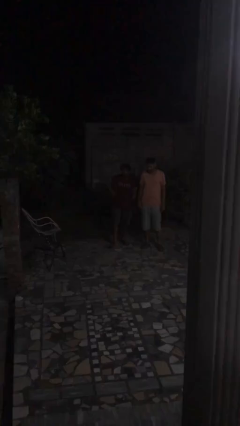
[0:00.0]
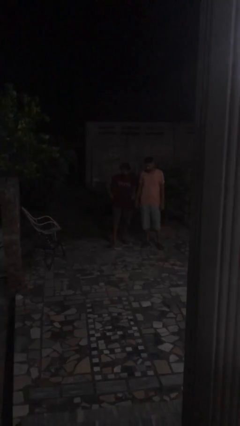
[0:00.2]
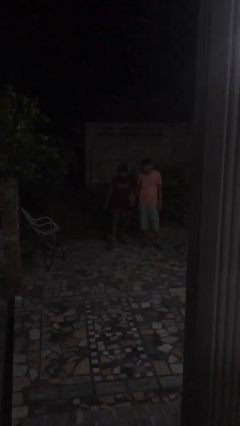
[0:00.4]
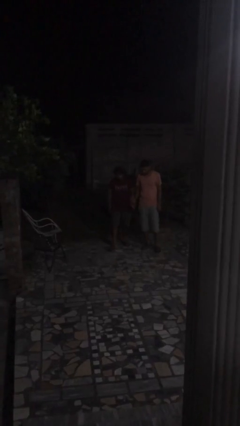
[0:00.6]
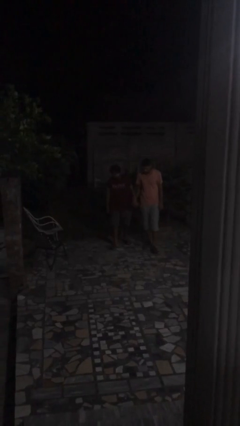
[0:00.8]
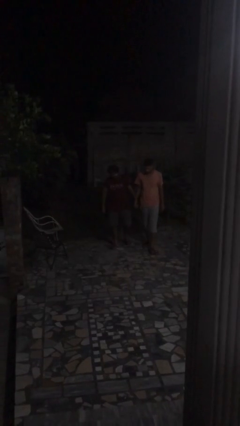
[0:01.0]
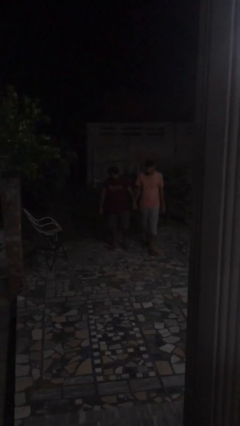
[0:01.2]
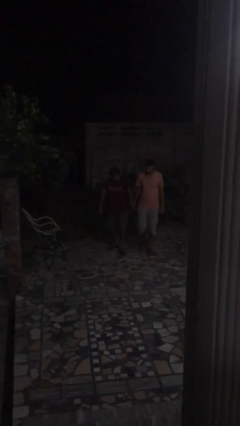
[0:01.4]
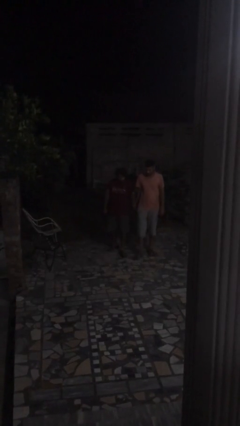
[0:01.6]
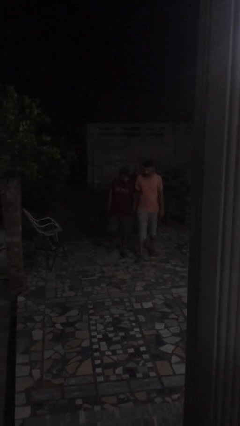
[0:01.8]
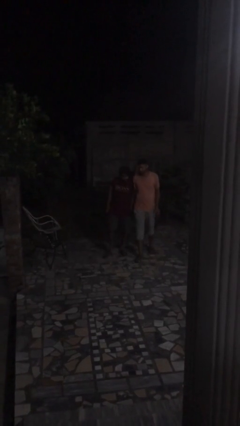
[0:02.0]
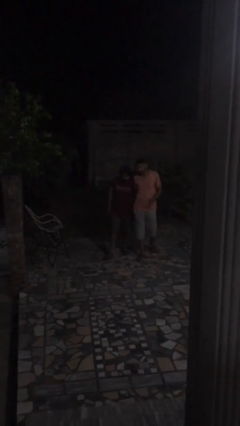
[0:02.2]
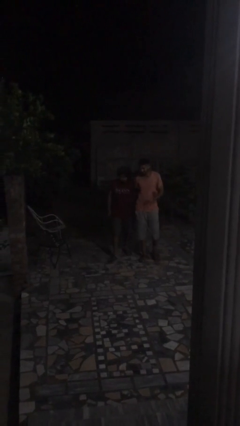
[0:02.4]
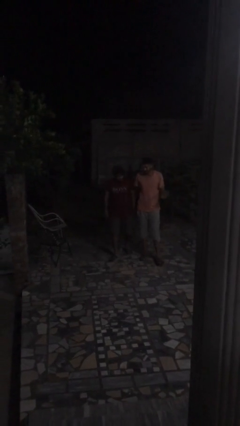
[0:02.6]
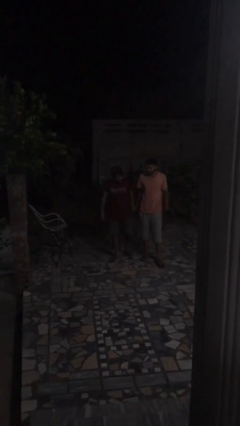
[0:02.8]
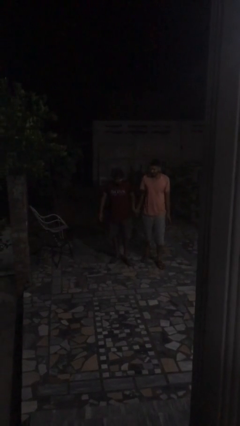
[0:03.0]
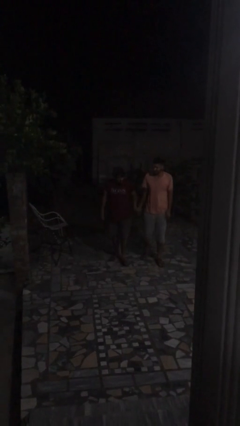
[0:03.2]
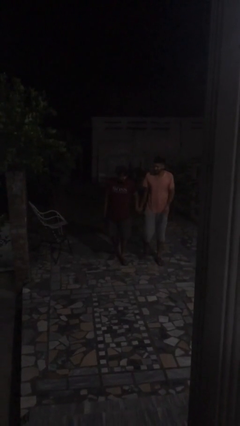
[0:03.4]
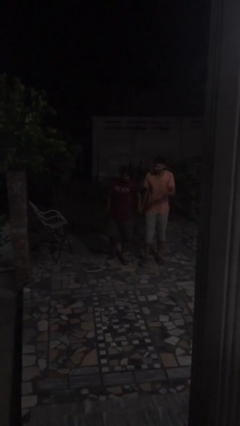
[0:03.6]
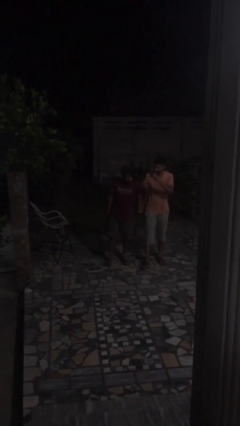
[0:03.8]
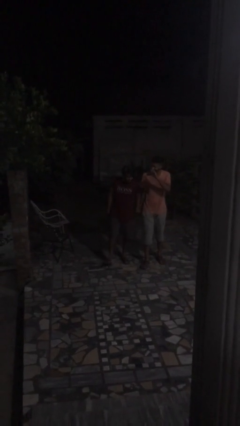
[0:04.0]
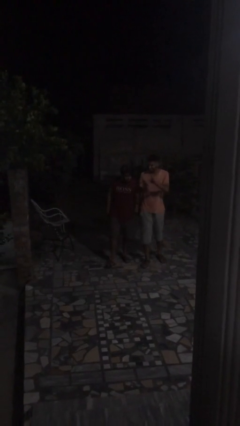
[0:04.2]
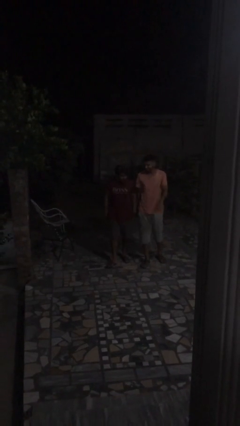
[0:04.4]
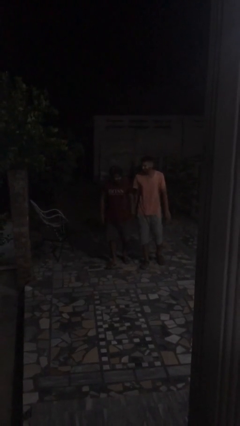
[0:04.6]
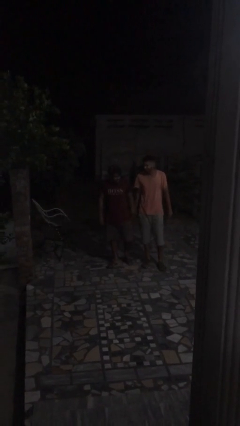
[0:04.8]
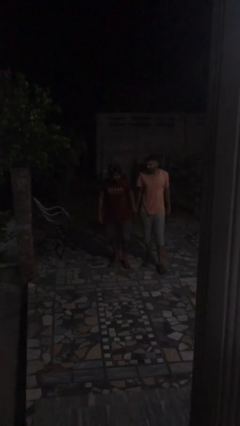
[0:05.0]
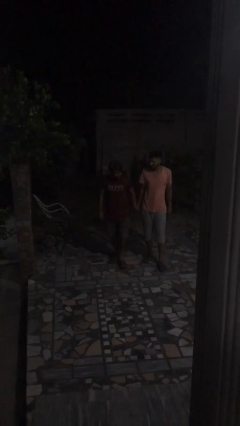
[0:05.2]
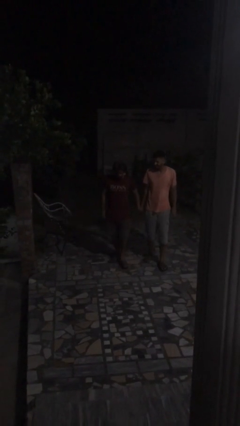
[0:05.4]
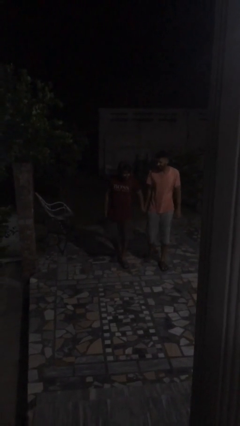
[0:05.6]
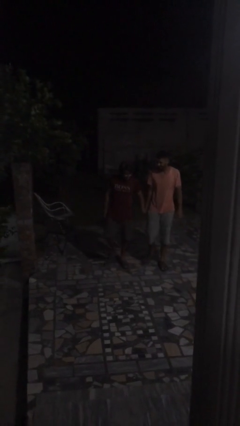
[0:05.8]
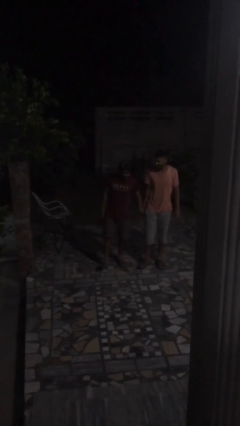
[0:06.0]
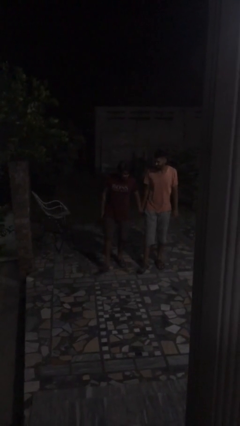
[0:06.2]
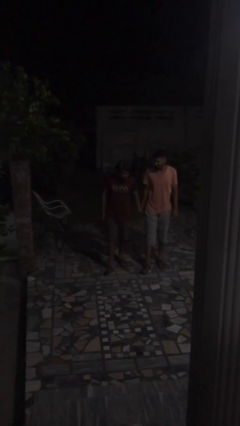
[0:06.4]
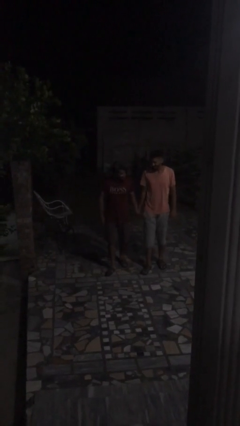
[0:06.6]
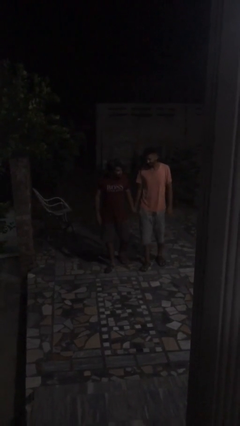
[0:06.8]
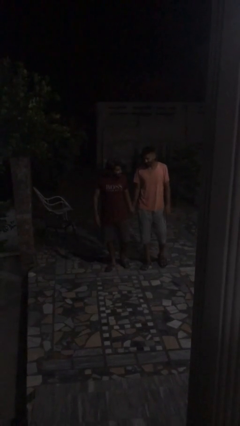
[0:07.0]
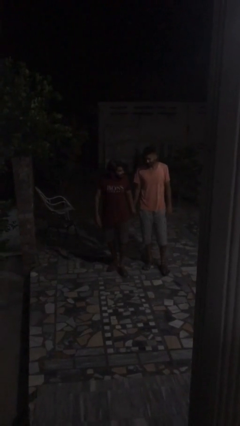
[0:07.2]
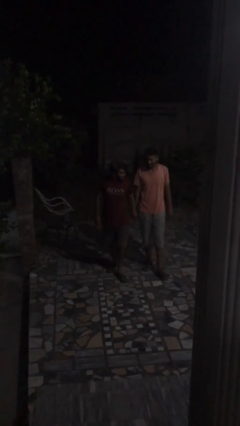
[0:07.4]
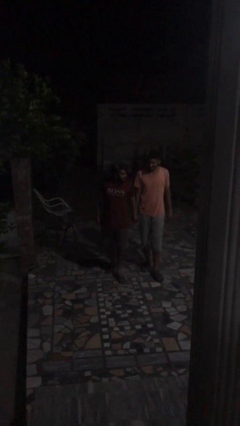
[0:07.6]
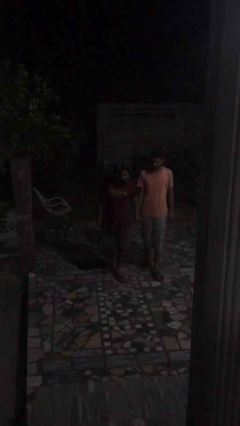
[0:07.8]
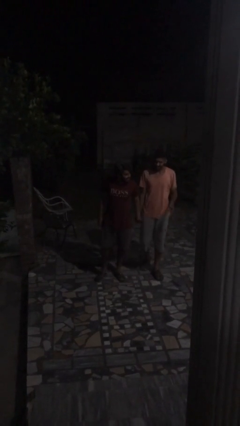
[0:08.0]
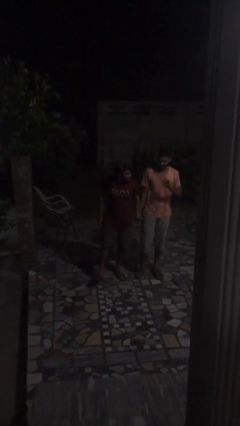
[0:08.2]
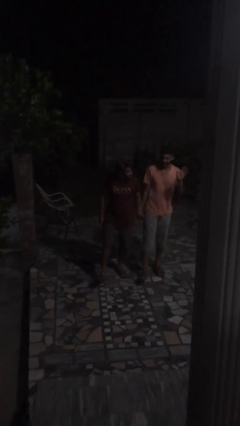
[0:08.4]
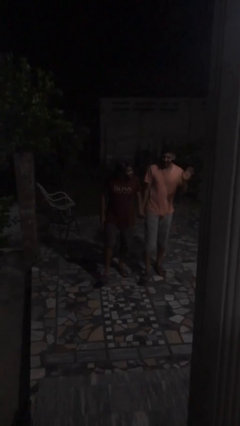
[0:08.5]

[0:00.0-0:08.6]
person holds hand

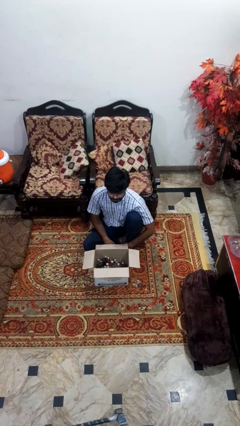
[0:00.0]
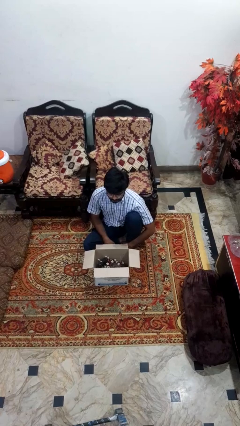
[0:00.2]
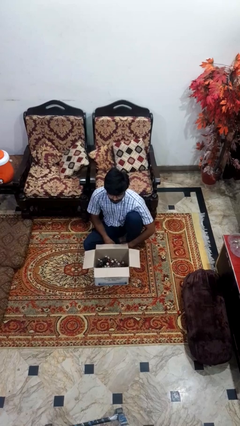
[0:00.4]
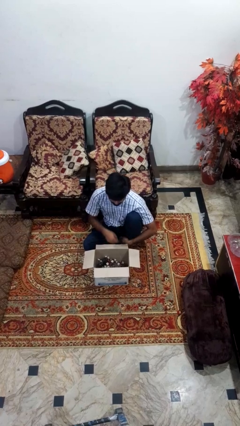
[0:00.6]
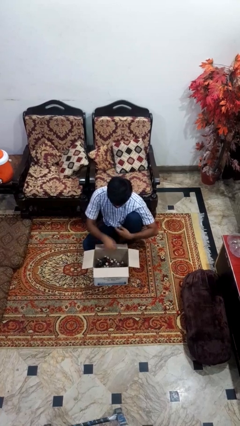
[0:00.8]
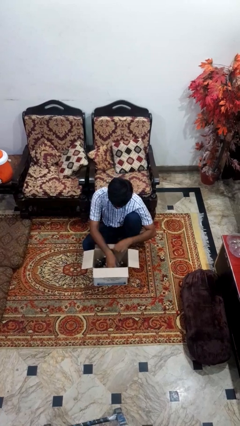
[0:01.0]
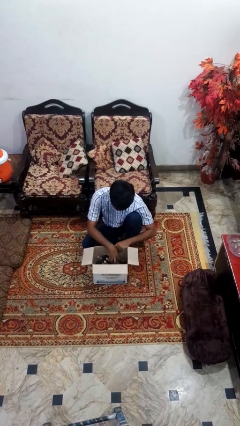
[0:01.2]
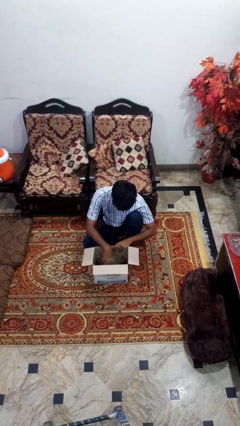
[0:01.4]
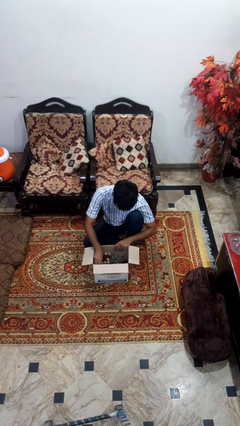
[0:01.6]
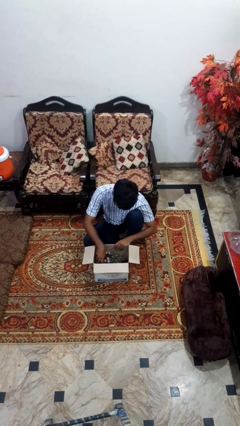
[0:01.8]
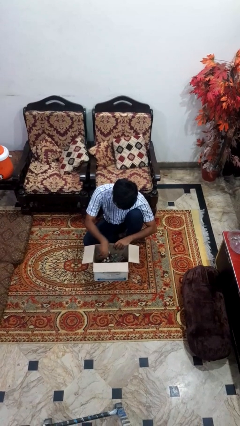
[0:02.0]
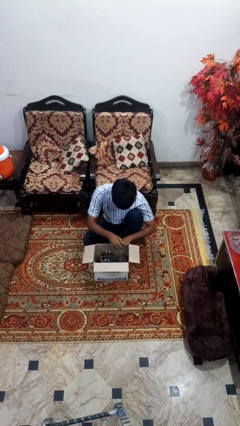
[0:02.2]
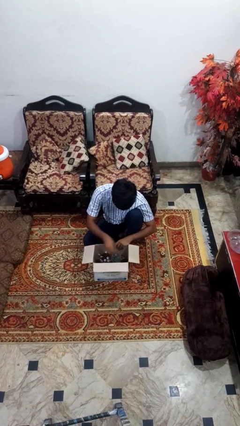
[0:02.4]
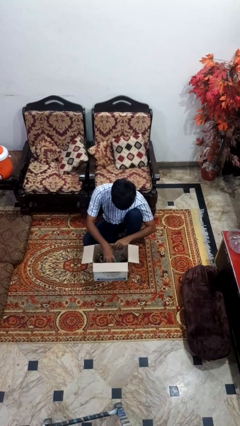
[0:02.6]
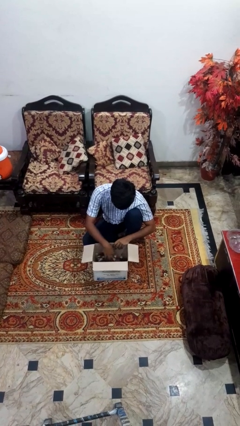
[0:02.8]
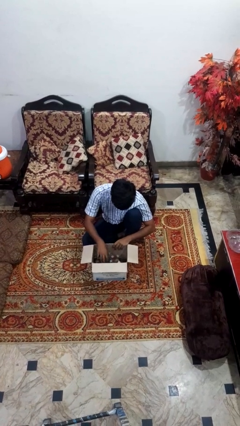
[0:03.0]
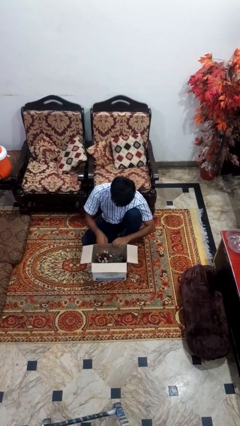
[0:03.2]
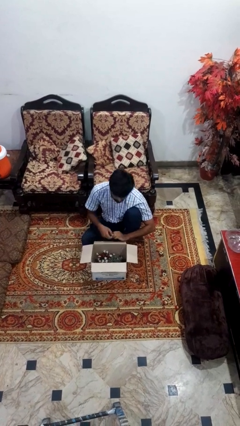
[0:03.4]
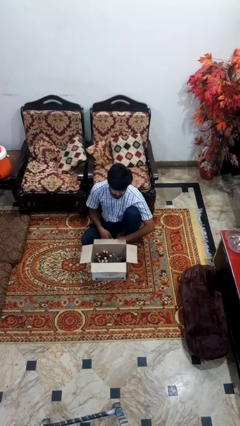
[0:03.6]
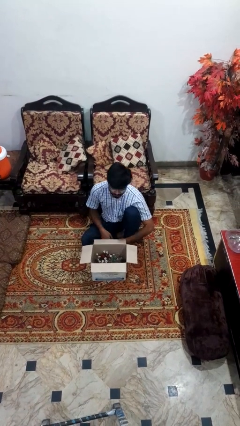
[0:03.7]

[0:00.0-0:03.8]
person searches in box

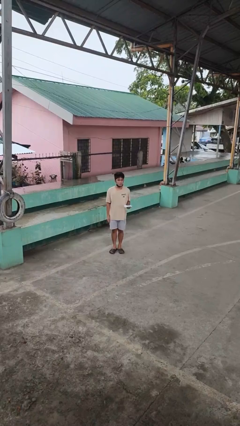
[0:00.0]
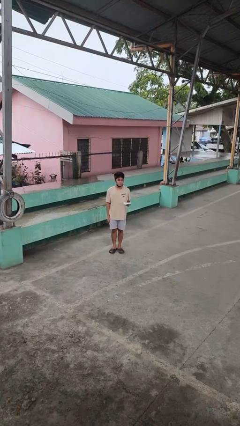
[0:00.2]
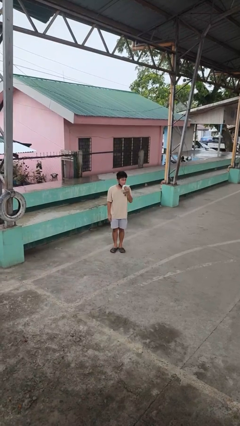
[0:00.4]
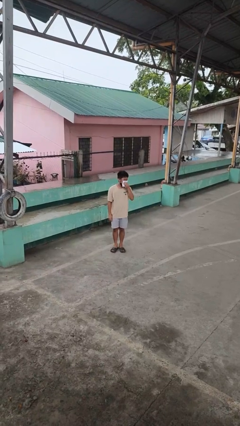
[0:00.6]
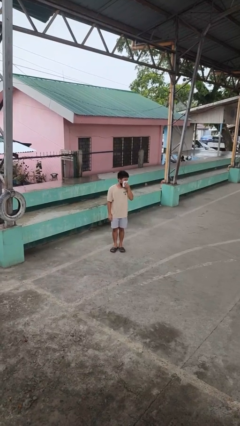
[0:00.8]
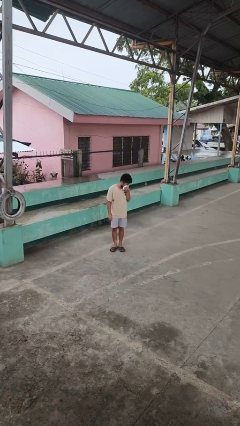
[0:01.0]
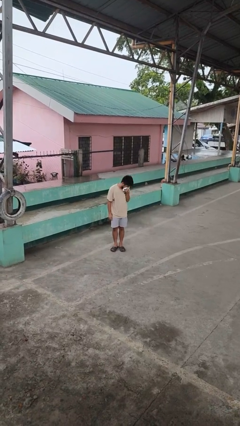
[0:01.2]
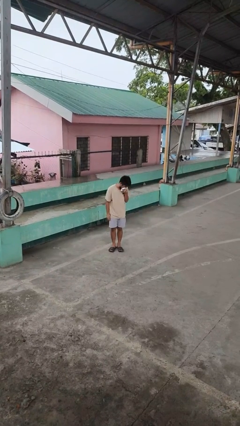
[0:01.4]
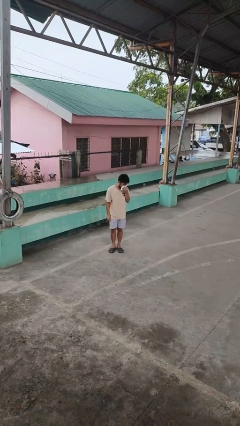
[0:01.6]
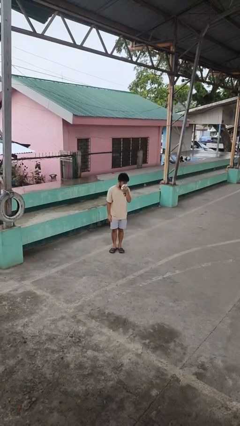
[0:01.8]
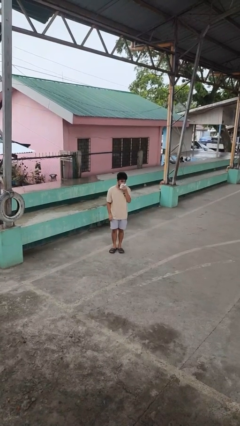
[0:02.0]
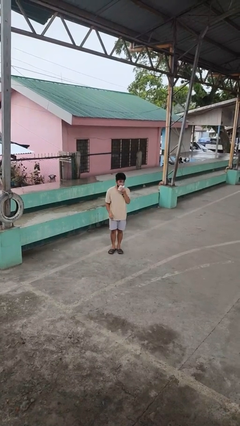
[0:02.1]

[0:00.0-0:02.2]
person blows nose

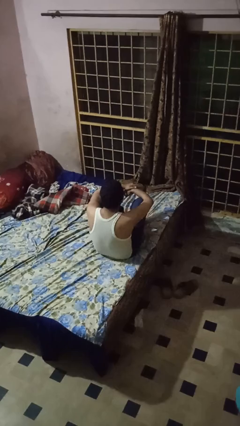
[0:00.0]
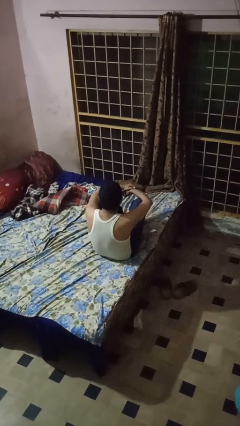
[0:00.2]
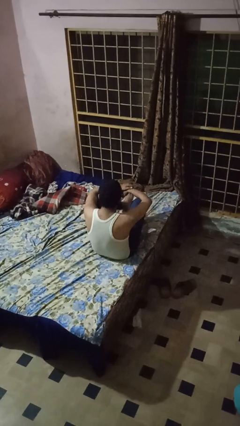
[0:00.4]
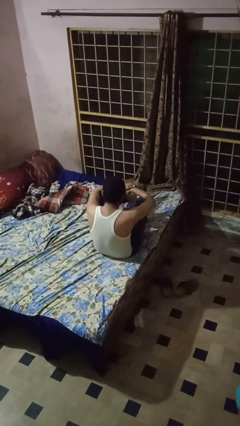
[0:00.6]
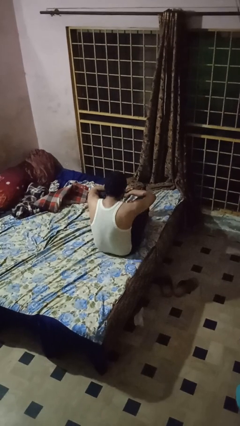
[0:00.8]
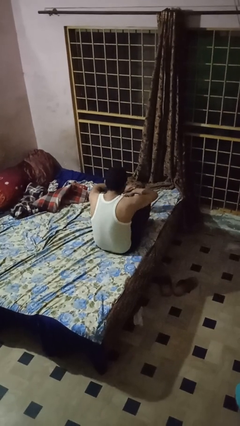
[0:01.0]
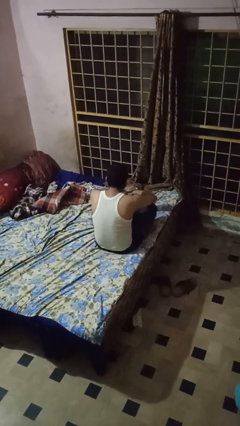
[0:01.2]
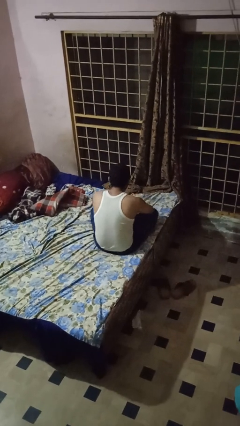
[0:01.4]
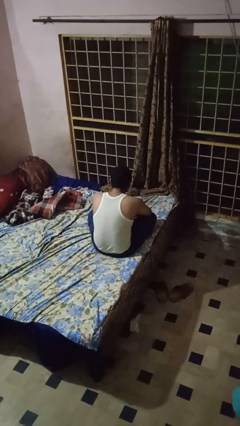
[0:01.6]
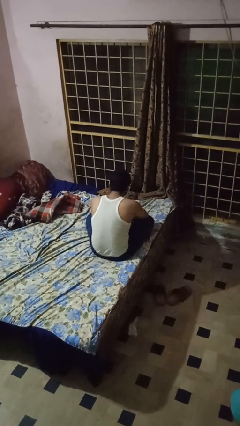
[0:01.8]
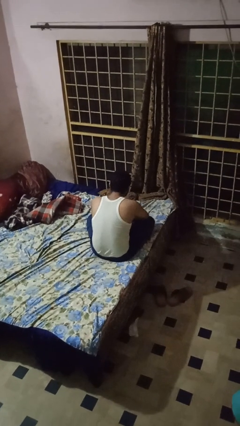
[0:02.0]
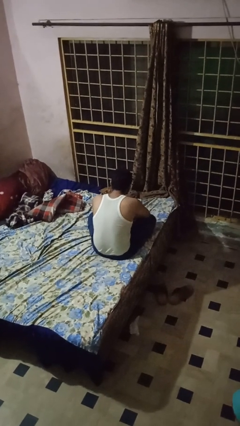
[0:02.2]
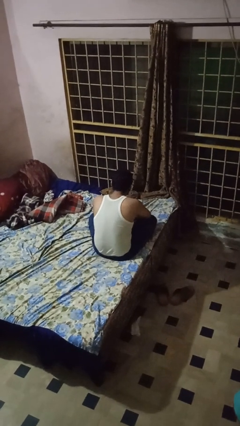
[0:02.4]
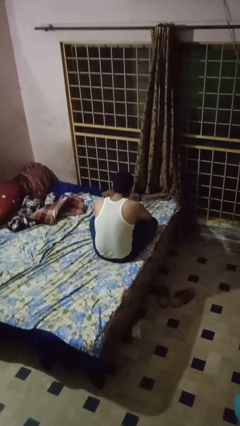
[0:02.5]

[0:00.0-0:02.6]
person crosses legs
